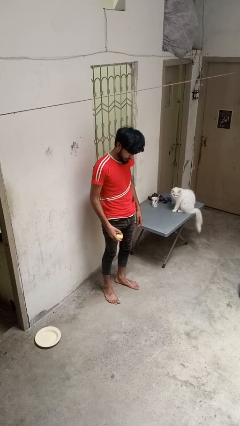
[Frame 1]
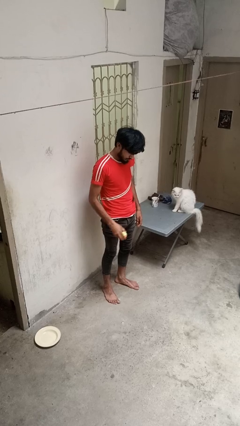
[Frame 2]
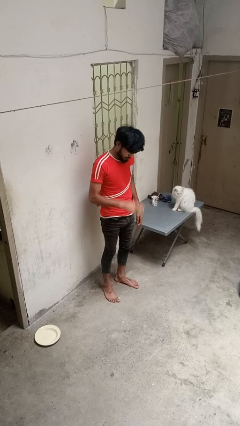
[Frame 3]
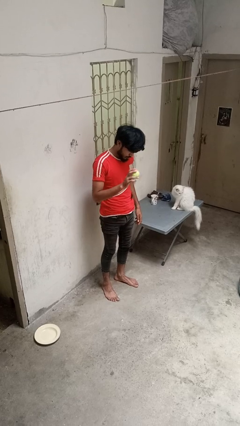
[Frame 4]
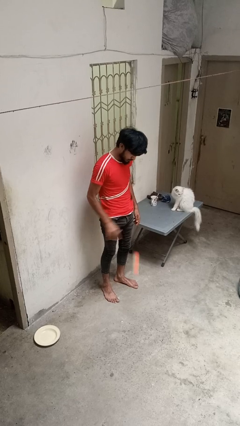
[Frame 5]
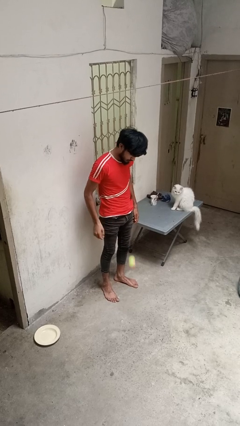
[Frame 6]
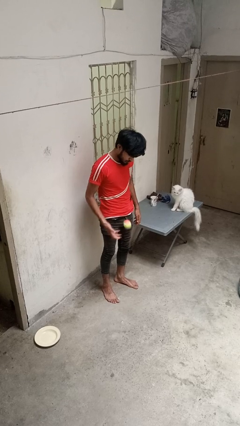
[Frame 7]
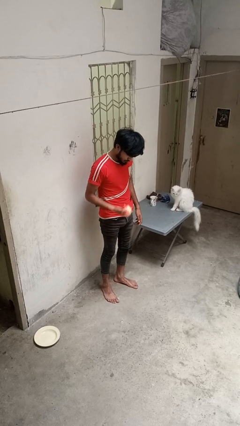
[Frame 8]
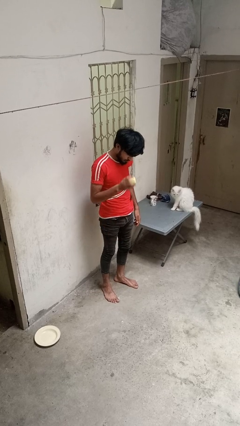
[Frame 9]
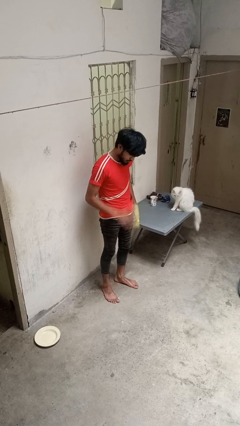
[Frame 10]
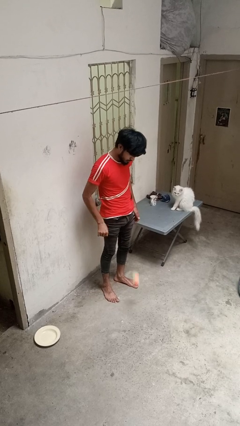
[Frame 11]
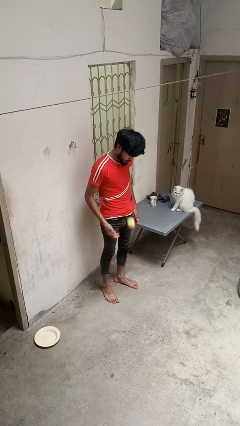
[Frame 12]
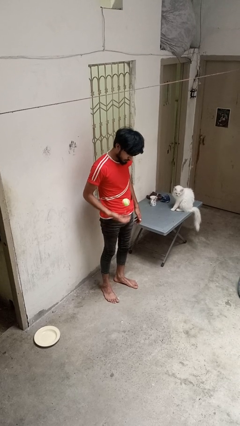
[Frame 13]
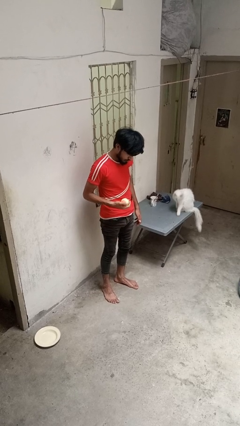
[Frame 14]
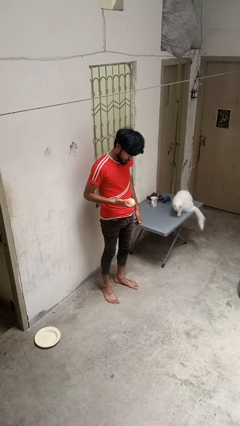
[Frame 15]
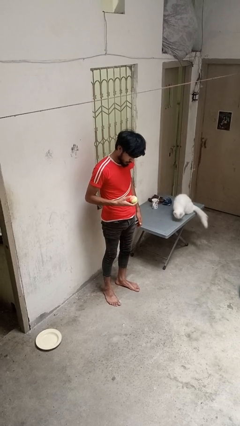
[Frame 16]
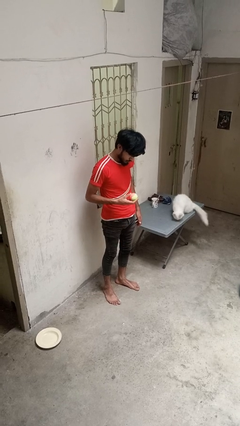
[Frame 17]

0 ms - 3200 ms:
person bounces ball on floor

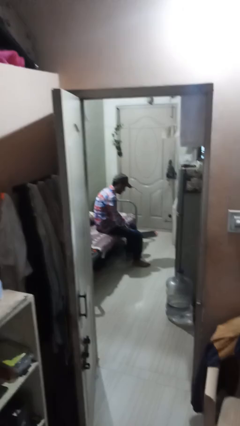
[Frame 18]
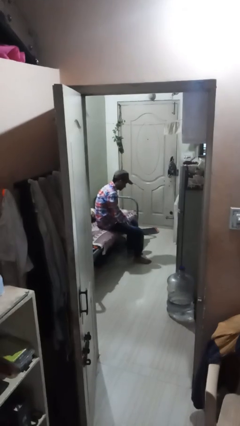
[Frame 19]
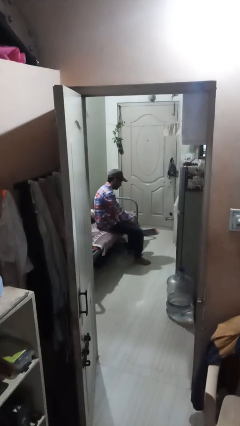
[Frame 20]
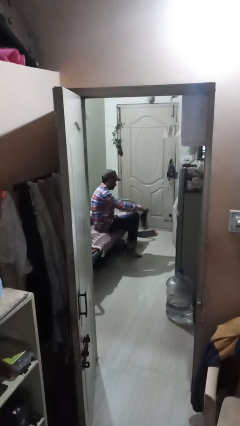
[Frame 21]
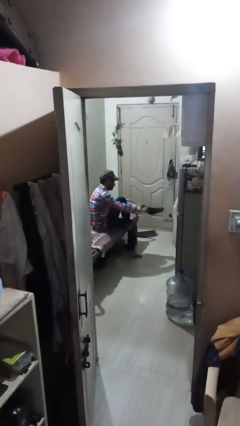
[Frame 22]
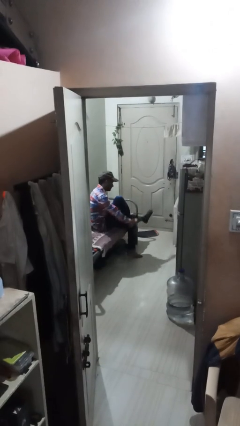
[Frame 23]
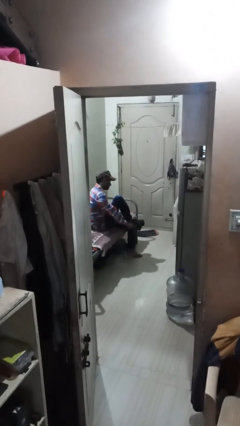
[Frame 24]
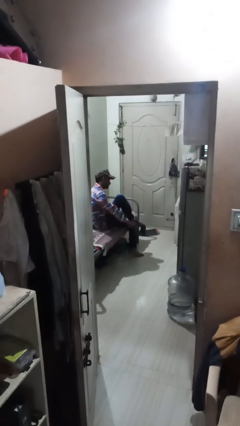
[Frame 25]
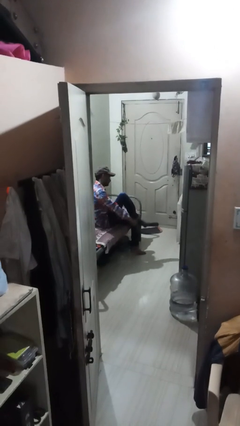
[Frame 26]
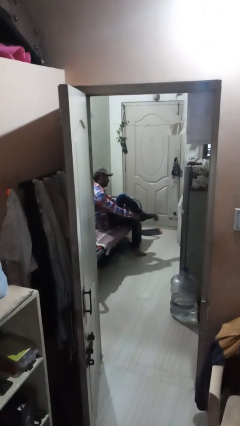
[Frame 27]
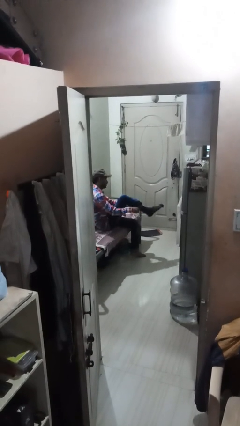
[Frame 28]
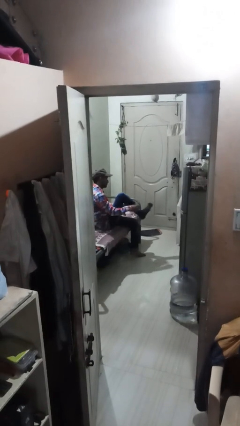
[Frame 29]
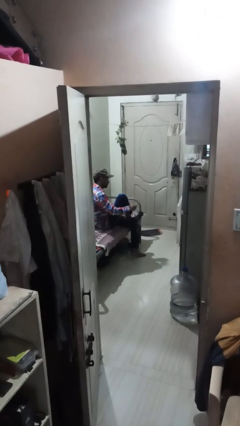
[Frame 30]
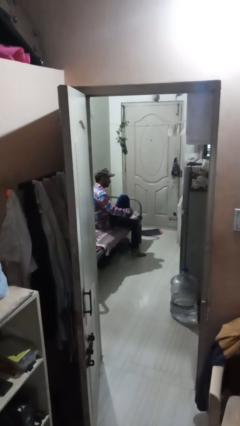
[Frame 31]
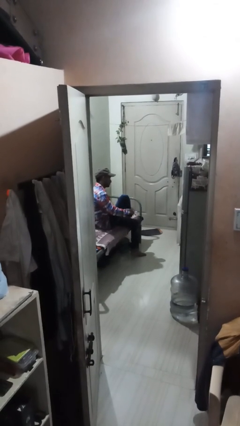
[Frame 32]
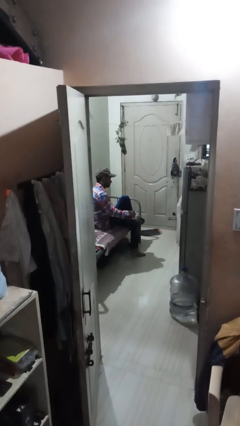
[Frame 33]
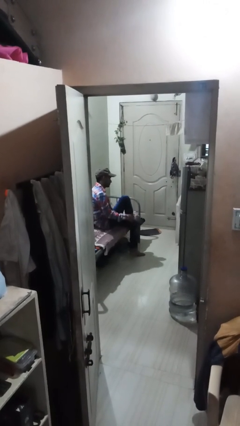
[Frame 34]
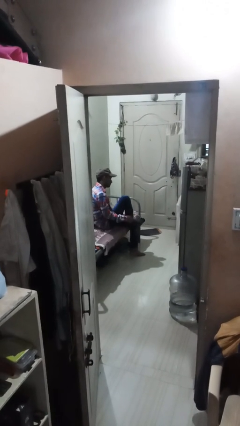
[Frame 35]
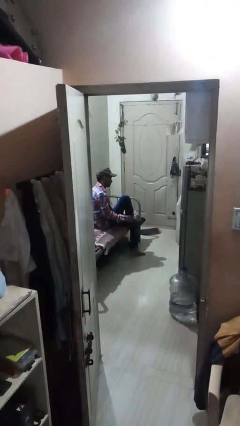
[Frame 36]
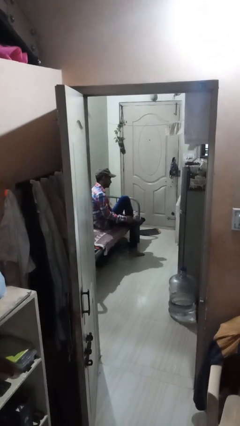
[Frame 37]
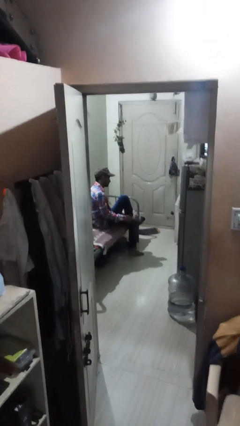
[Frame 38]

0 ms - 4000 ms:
person puts on socks

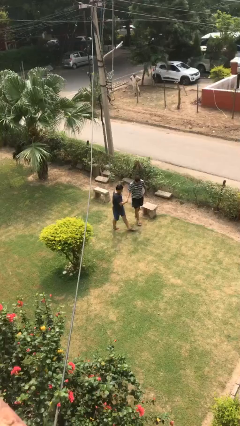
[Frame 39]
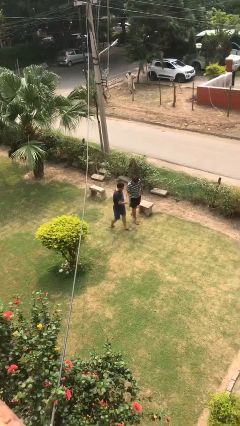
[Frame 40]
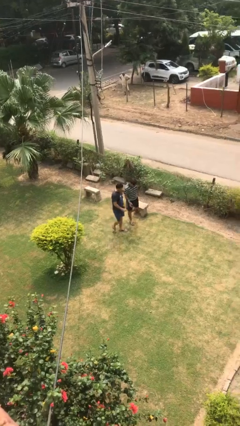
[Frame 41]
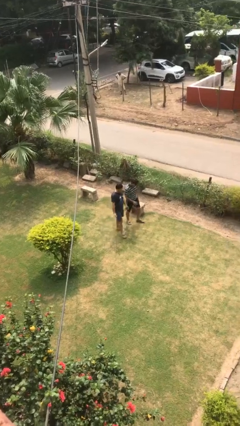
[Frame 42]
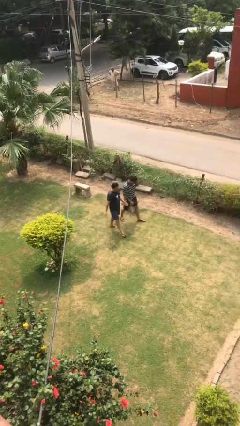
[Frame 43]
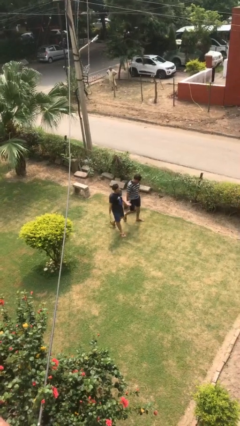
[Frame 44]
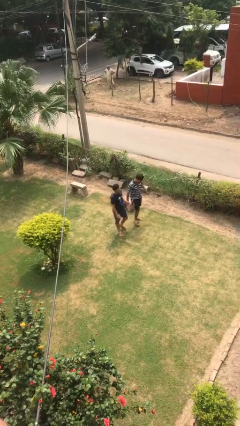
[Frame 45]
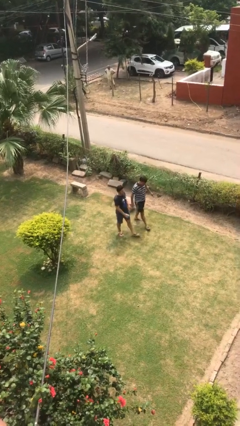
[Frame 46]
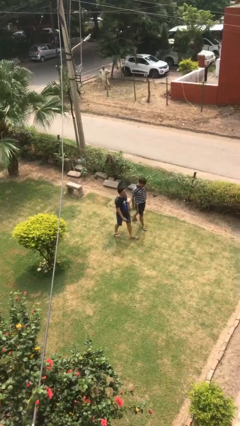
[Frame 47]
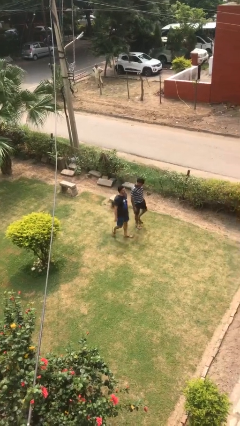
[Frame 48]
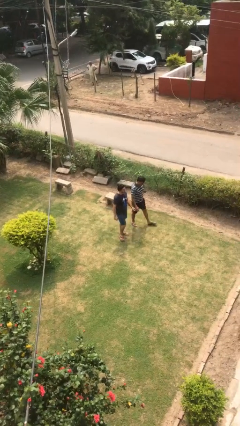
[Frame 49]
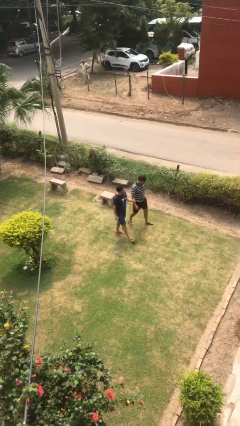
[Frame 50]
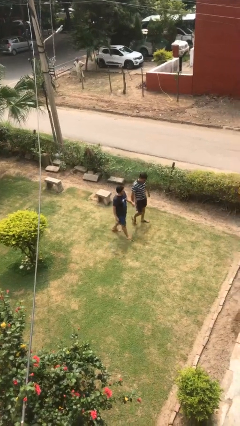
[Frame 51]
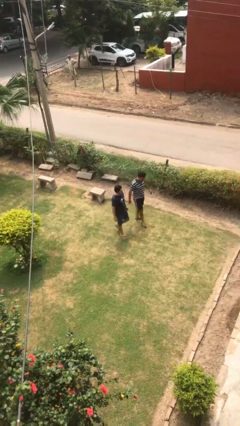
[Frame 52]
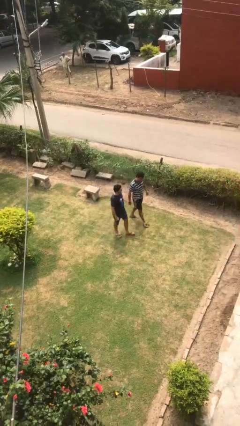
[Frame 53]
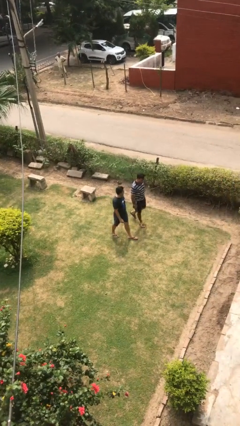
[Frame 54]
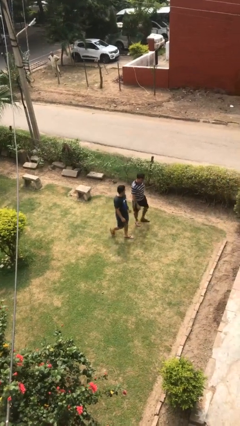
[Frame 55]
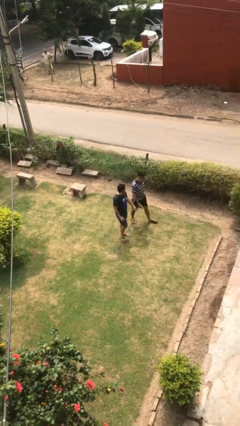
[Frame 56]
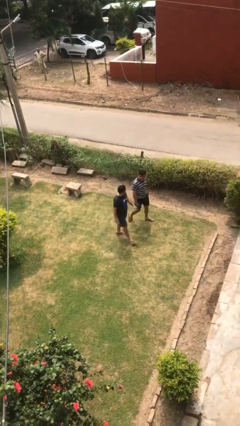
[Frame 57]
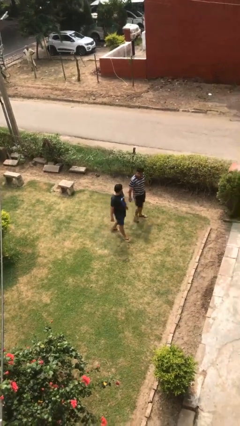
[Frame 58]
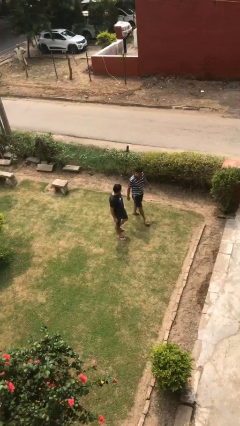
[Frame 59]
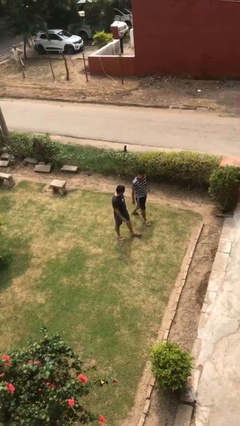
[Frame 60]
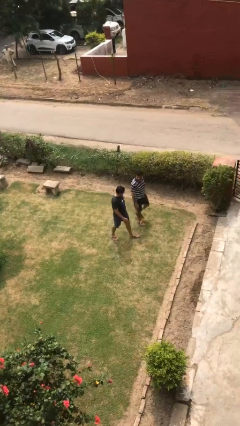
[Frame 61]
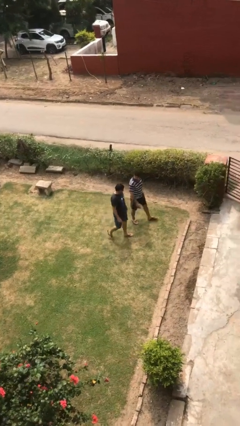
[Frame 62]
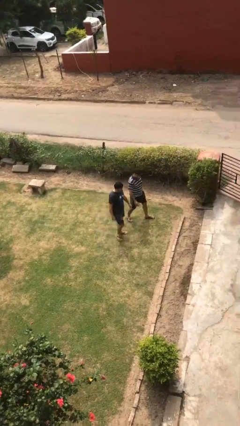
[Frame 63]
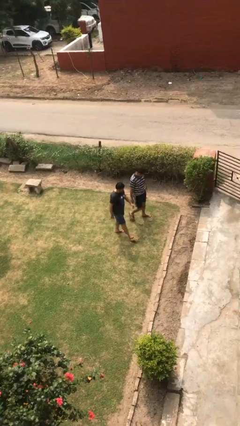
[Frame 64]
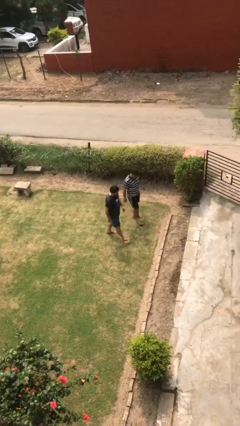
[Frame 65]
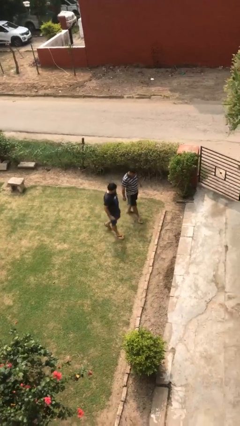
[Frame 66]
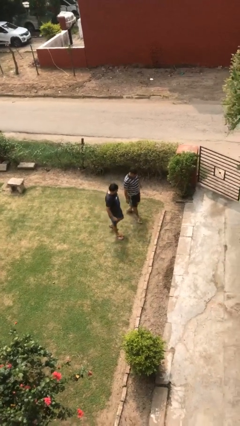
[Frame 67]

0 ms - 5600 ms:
person talks to person

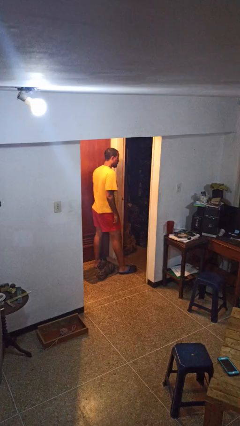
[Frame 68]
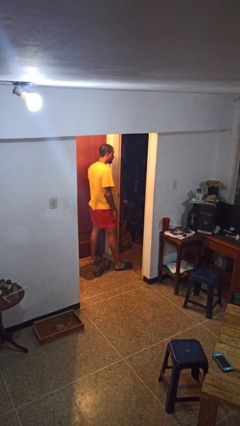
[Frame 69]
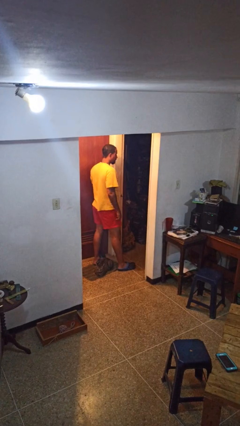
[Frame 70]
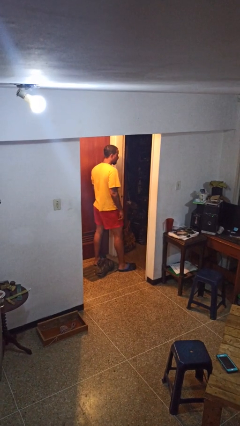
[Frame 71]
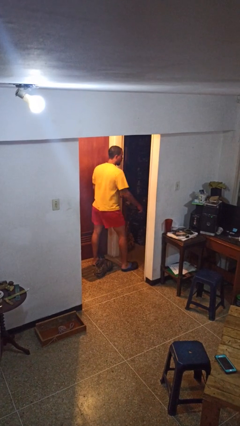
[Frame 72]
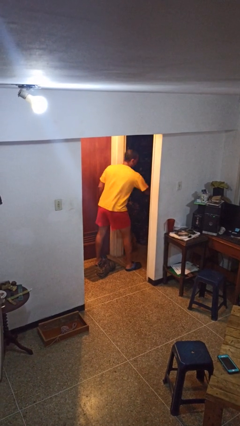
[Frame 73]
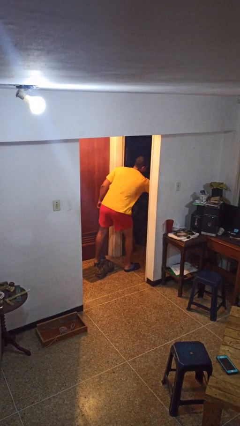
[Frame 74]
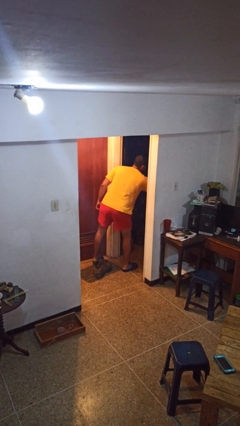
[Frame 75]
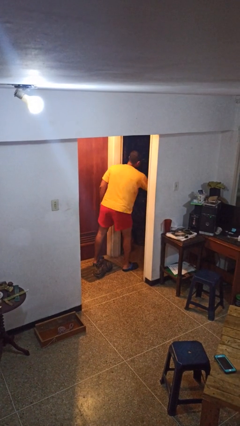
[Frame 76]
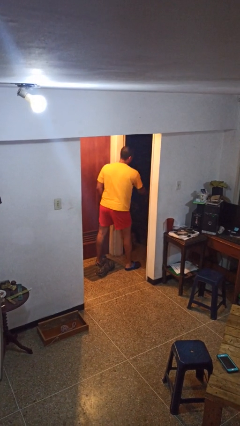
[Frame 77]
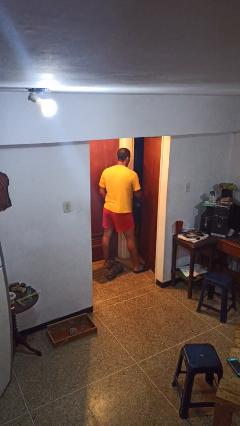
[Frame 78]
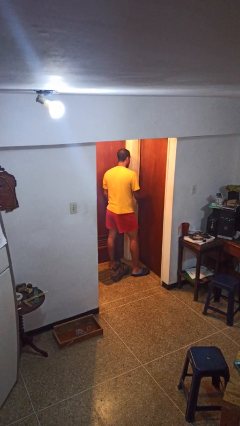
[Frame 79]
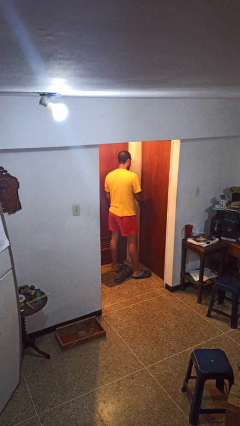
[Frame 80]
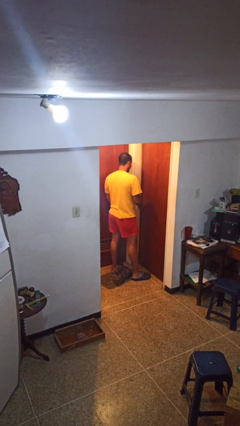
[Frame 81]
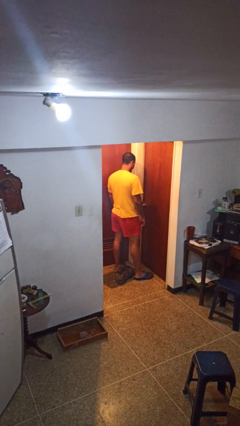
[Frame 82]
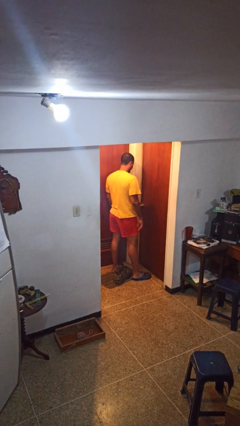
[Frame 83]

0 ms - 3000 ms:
person closes facility door

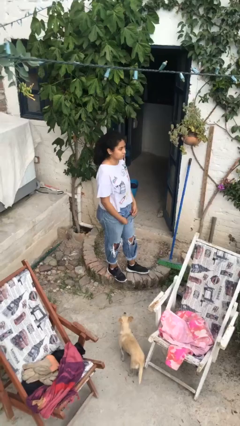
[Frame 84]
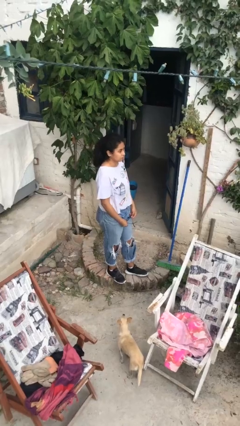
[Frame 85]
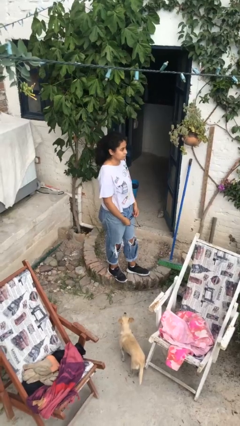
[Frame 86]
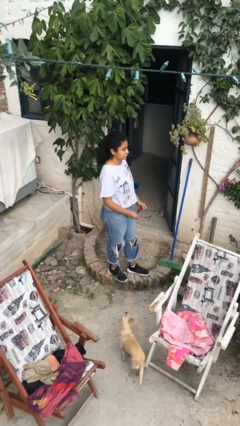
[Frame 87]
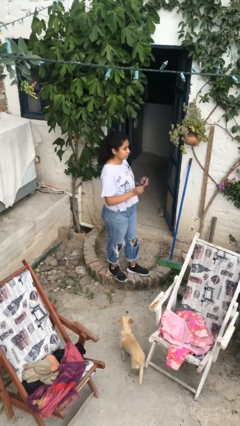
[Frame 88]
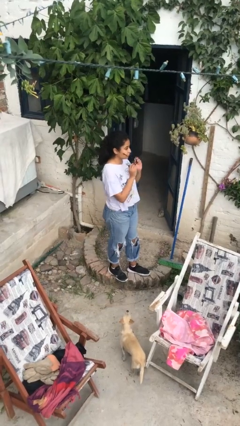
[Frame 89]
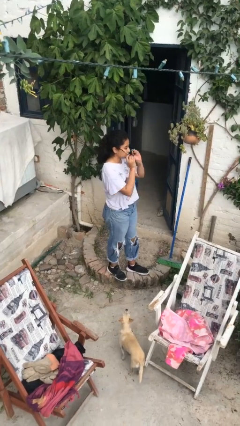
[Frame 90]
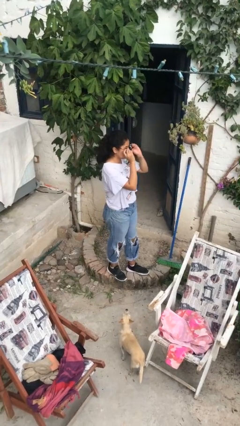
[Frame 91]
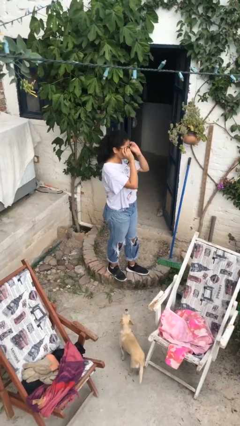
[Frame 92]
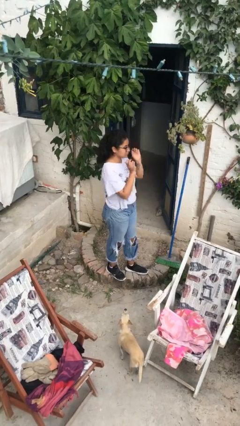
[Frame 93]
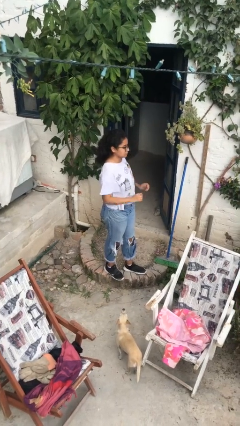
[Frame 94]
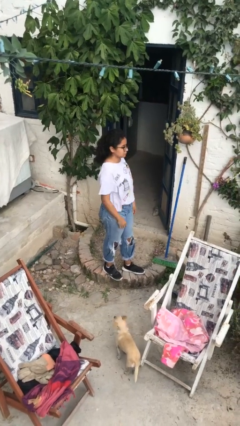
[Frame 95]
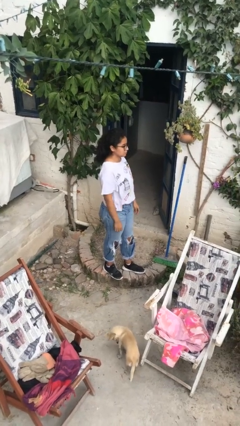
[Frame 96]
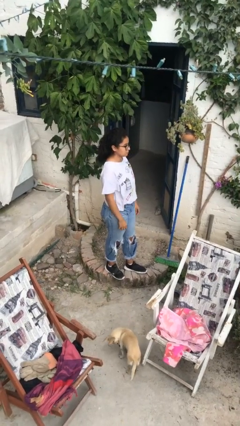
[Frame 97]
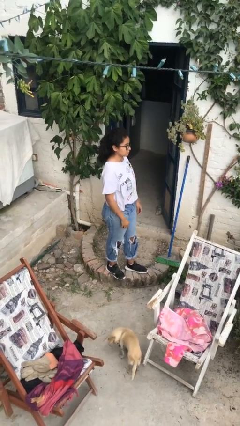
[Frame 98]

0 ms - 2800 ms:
person puts on glasses
